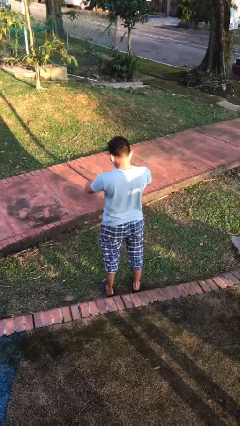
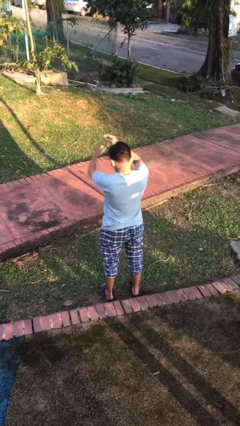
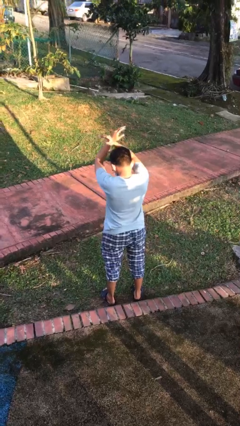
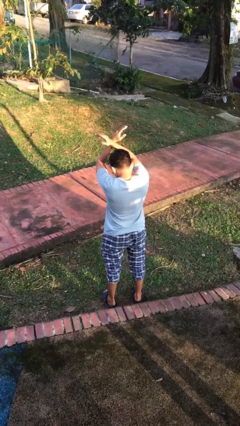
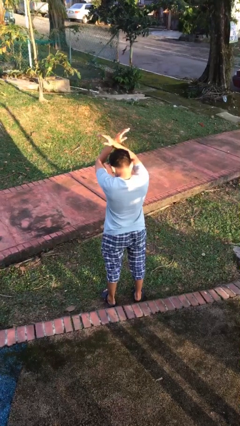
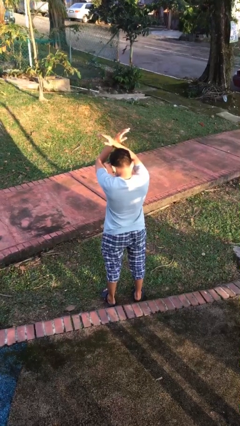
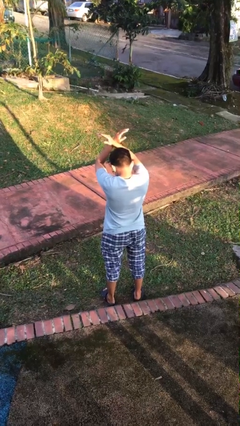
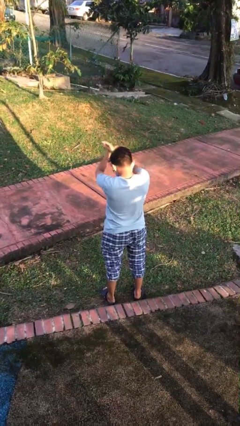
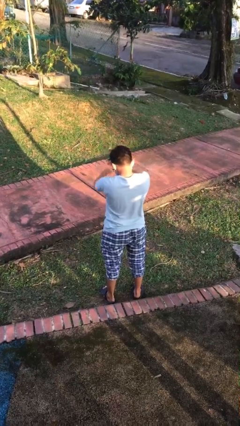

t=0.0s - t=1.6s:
person gestures arms x

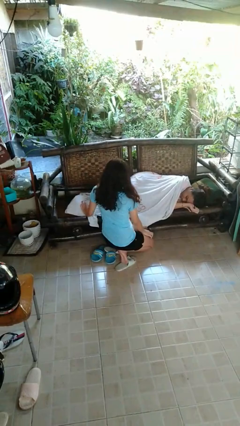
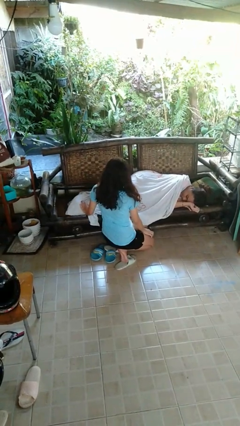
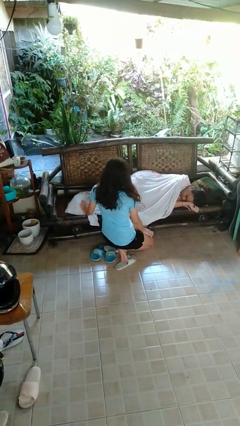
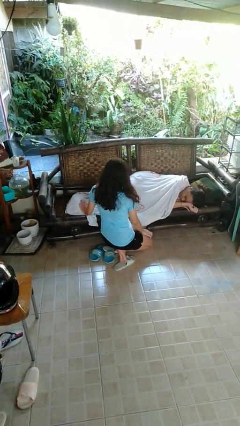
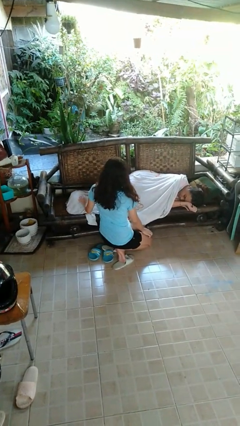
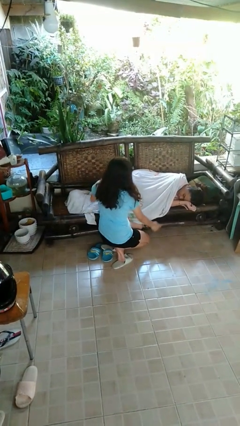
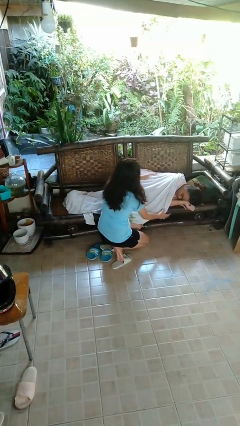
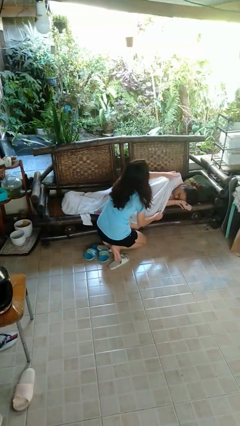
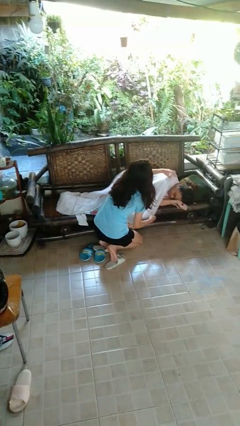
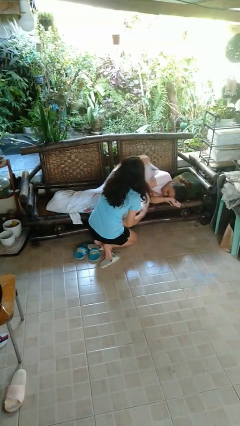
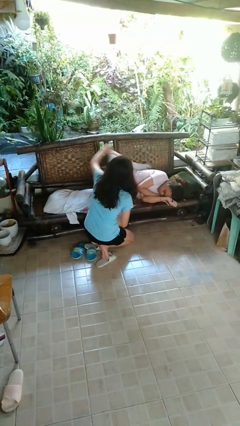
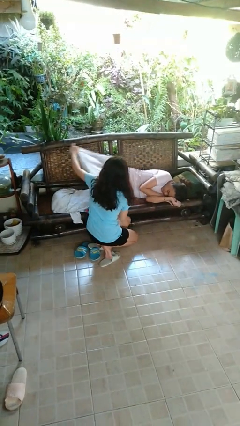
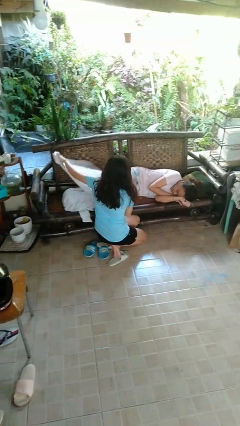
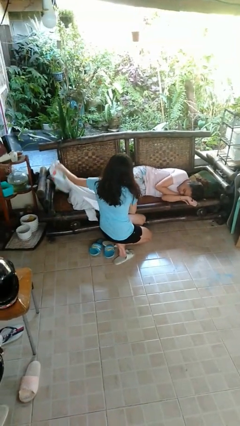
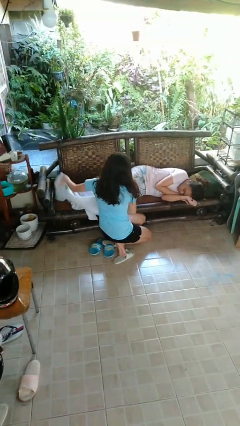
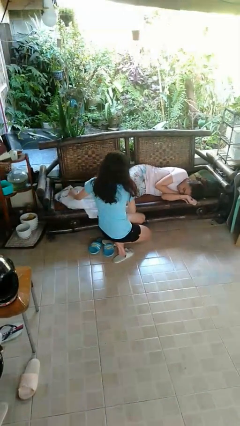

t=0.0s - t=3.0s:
person uncovers friend with blanket

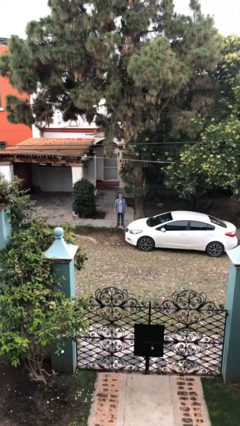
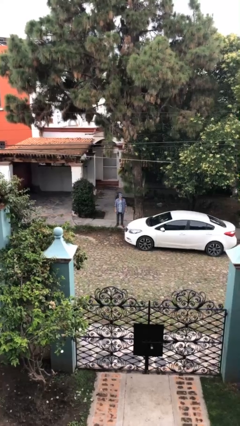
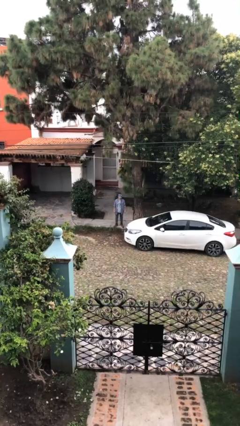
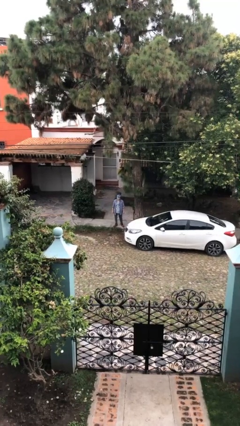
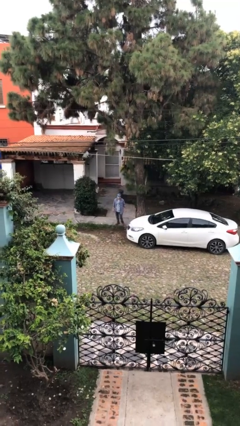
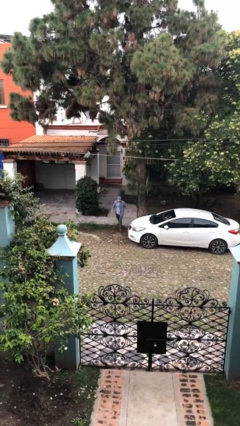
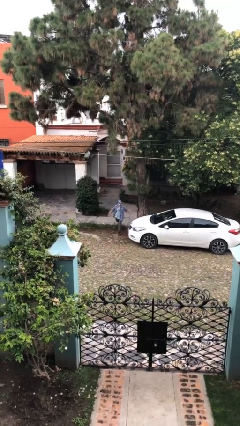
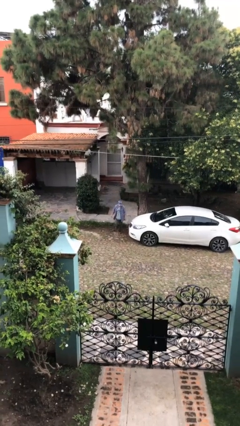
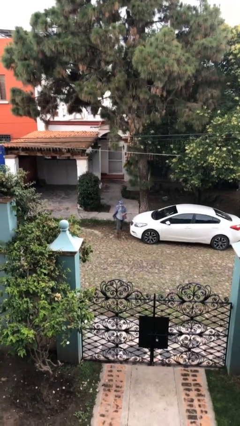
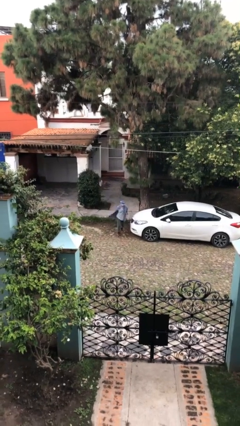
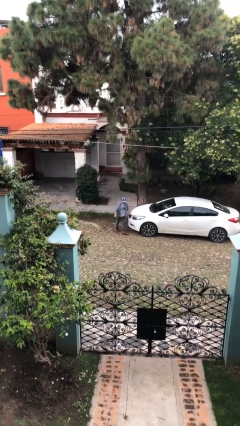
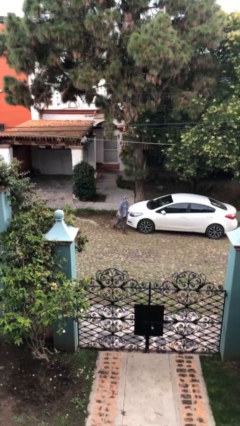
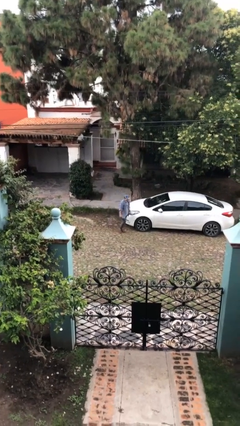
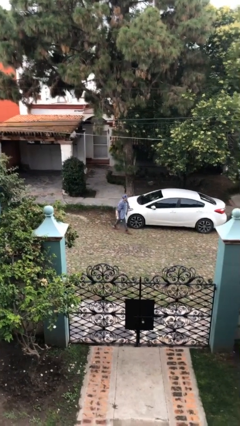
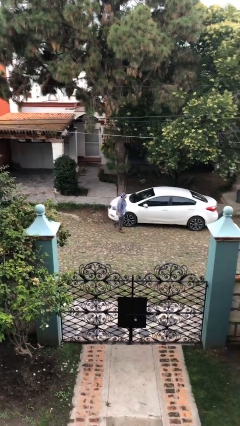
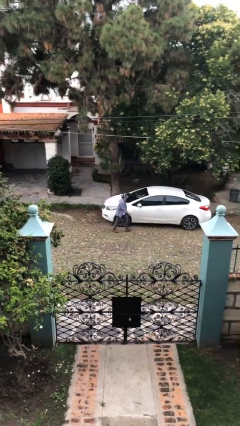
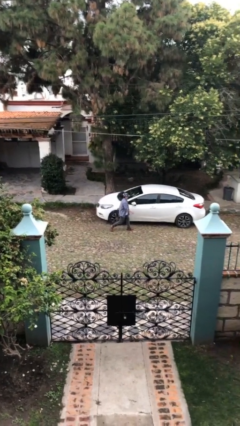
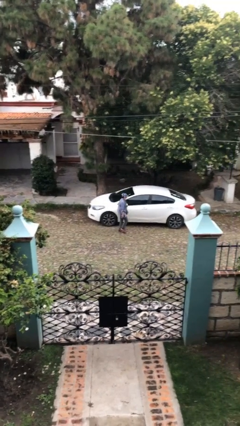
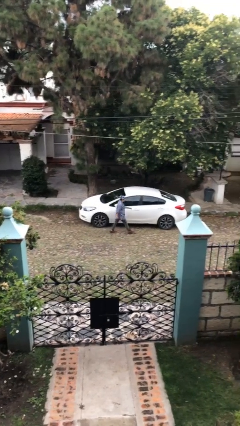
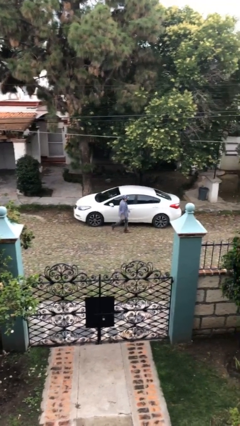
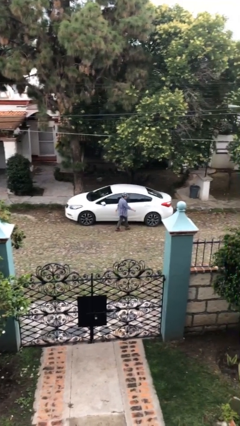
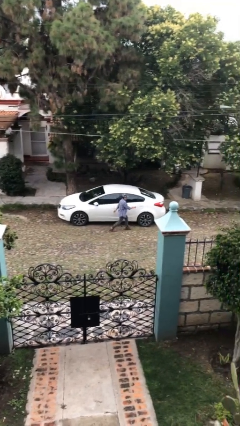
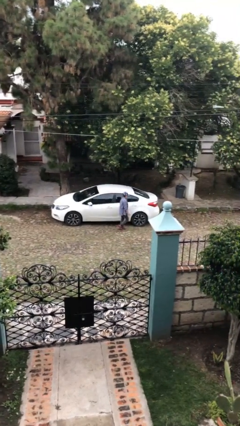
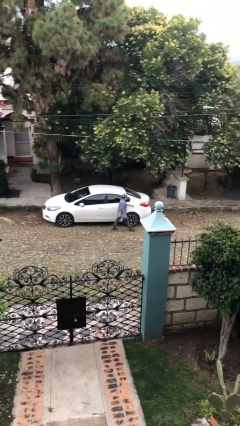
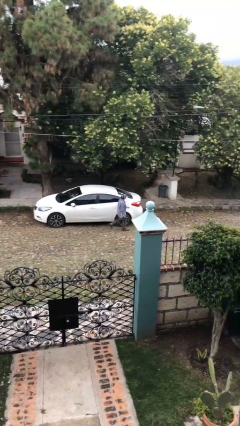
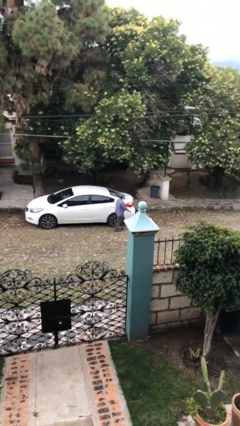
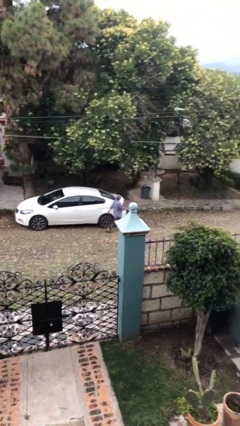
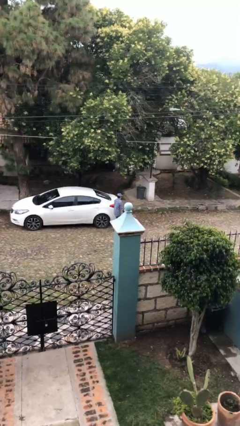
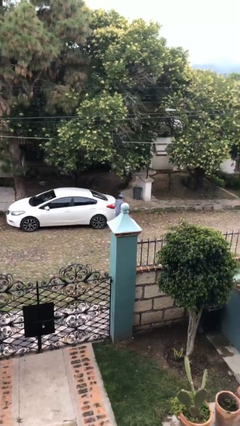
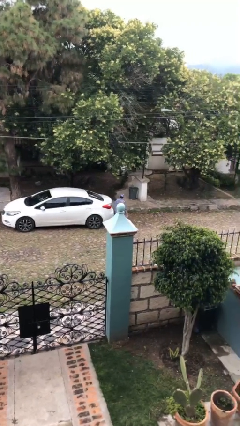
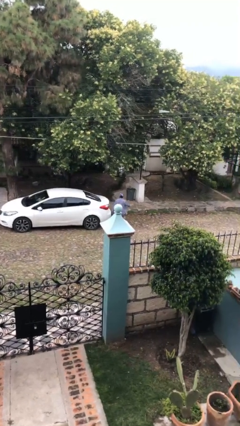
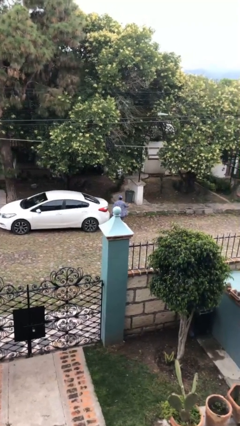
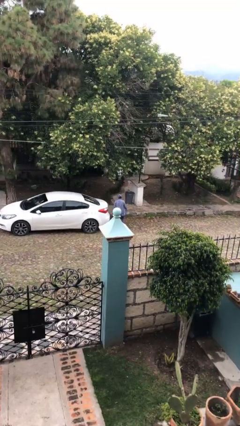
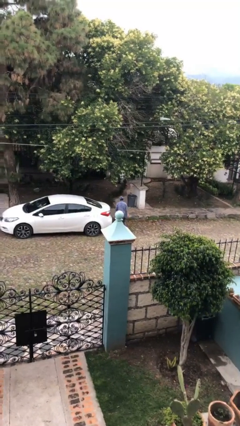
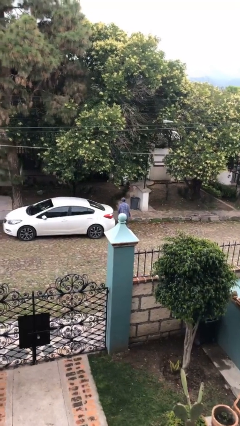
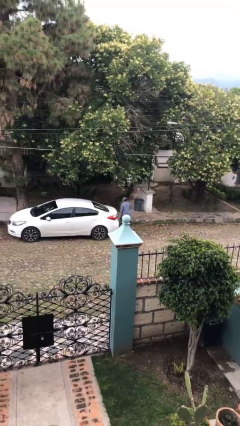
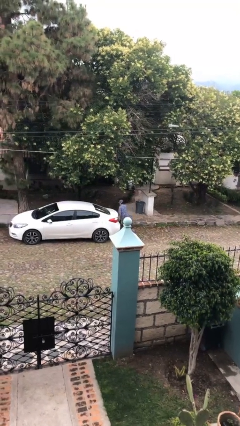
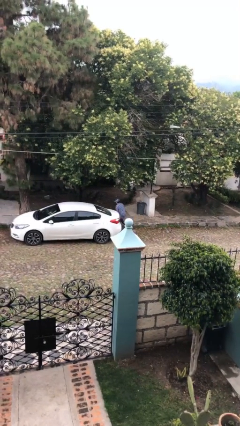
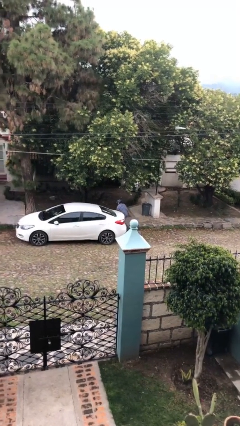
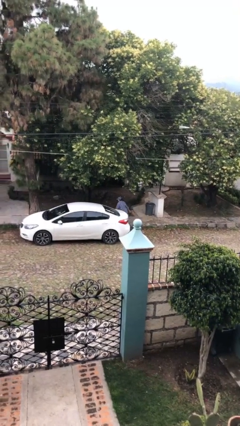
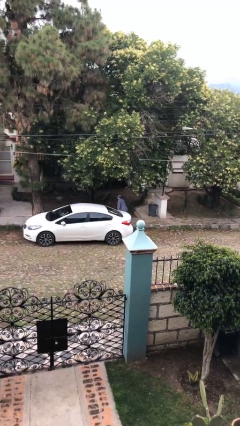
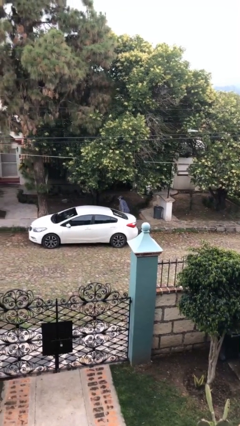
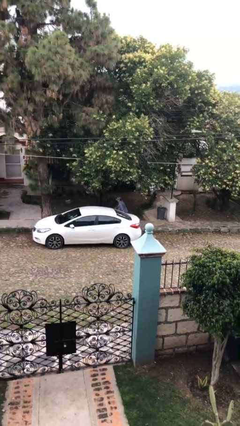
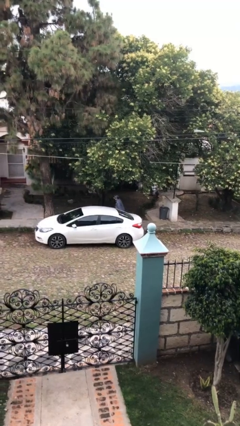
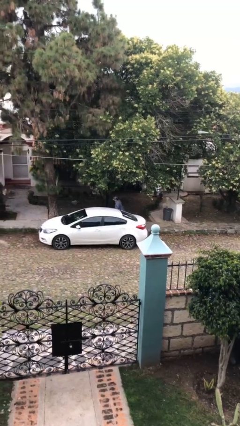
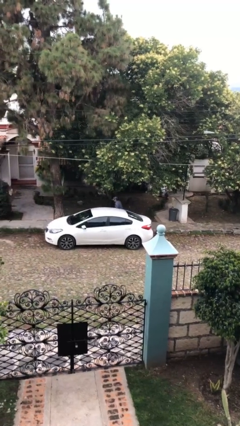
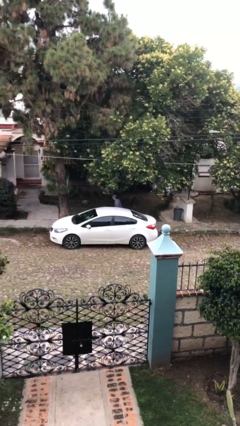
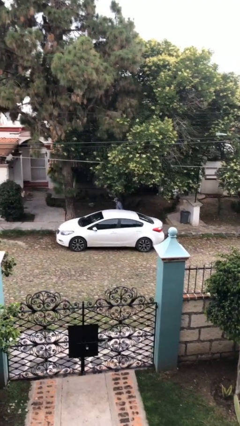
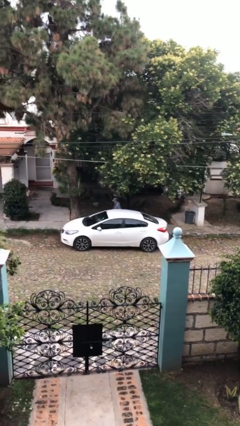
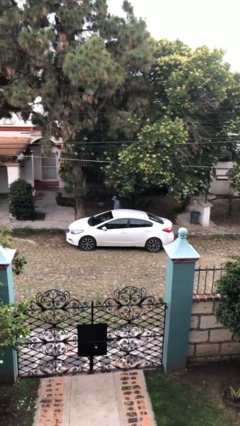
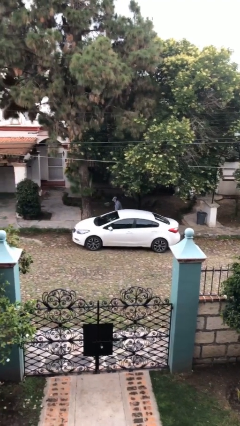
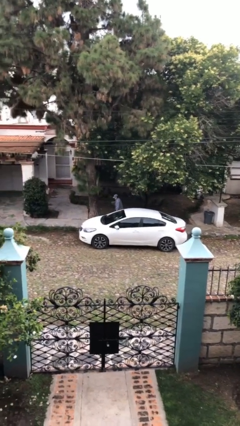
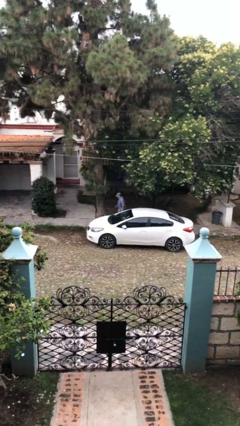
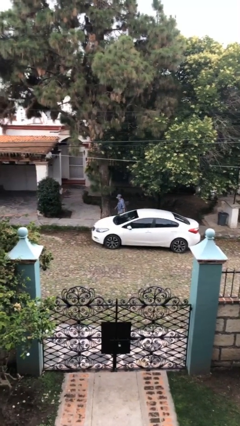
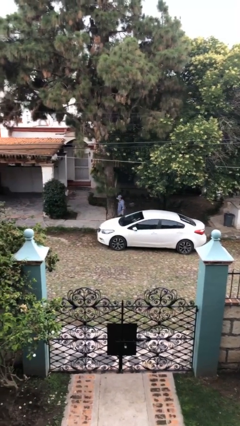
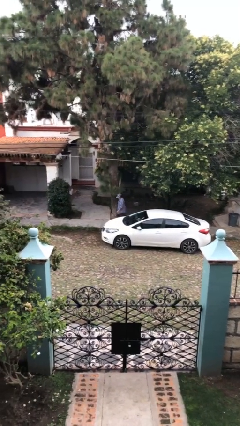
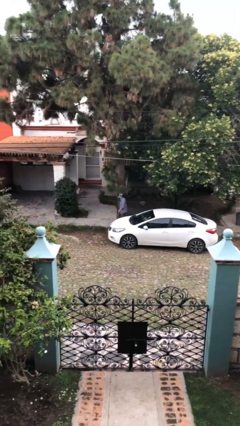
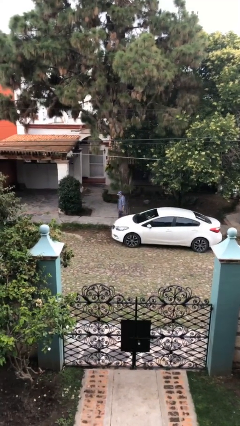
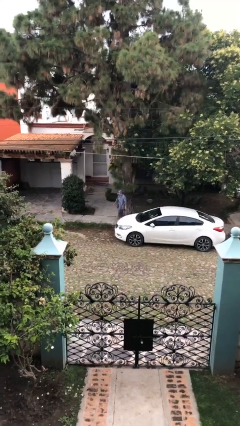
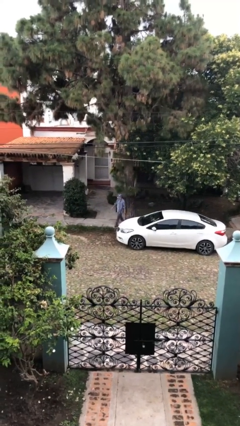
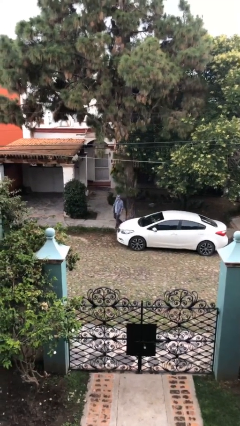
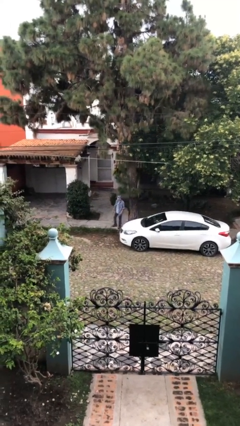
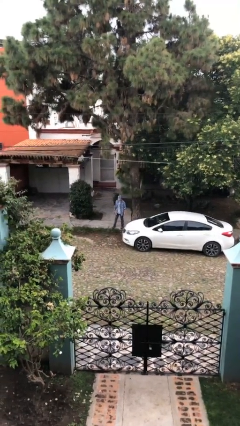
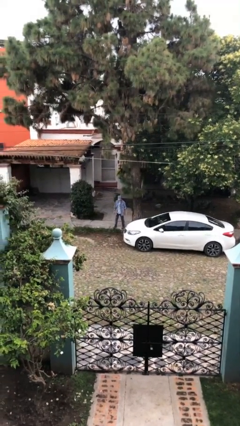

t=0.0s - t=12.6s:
person walks around car

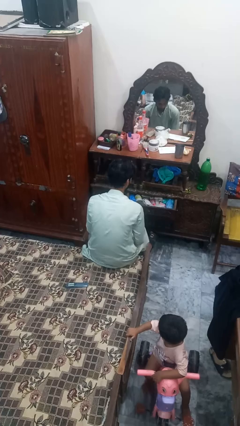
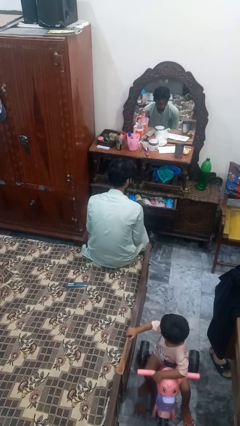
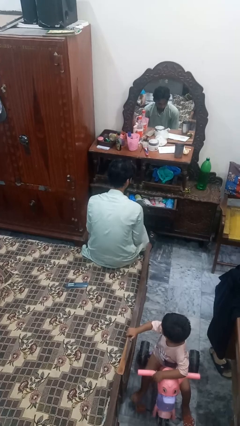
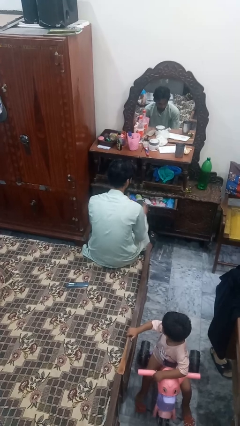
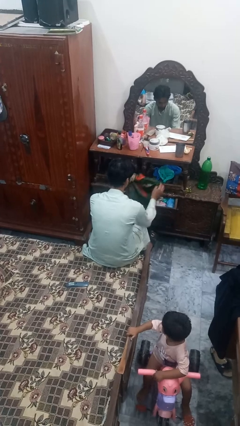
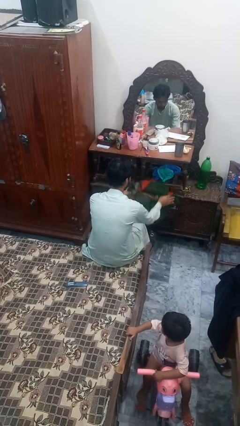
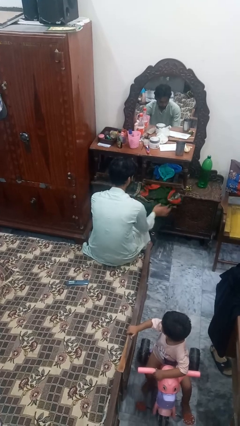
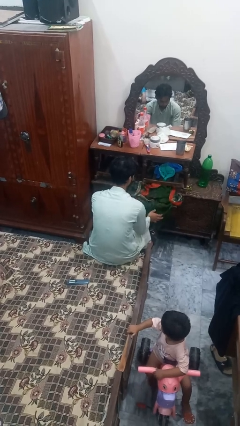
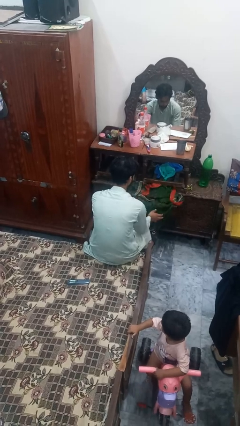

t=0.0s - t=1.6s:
person puts clothes into dresser
